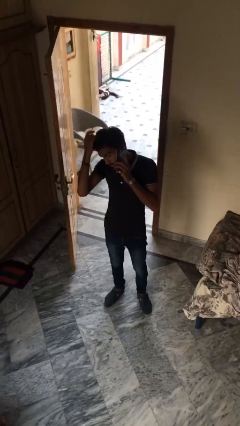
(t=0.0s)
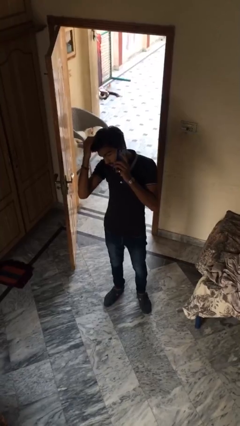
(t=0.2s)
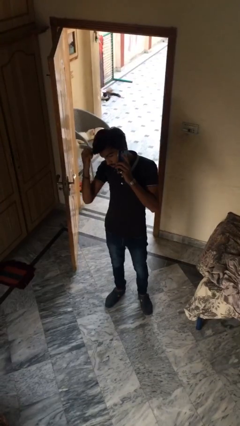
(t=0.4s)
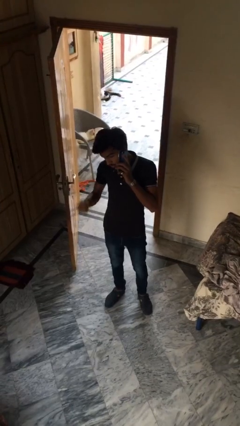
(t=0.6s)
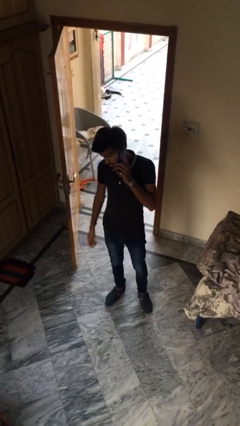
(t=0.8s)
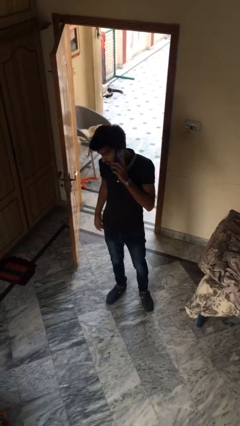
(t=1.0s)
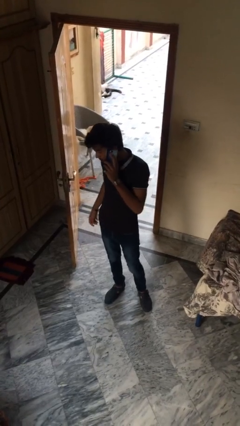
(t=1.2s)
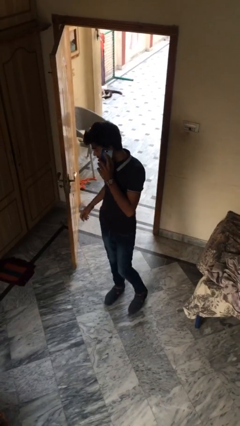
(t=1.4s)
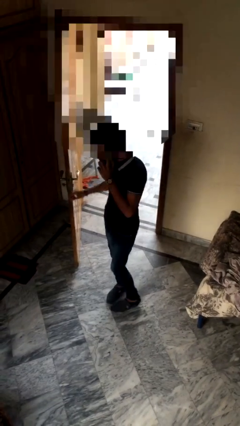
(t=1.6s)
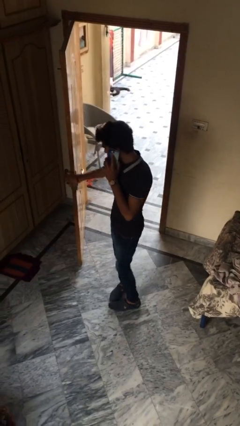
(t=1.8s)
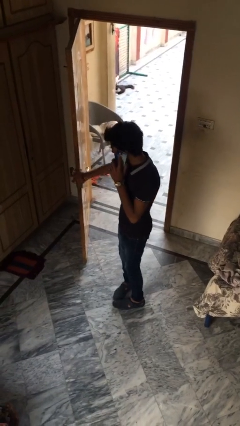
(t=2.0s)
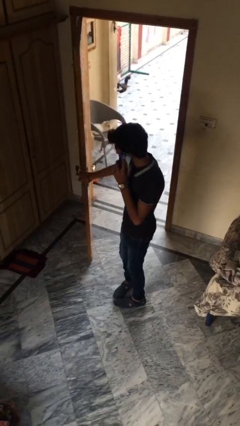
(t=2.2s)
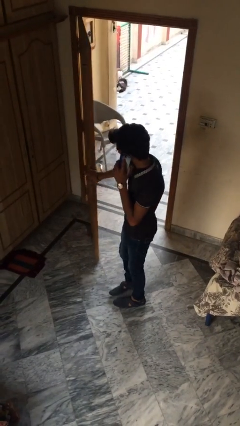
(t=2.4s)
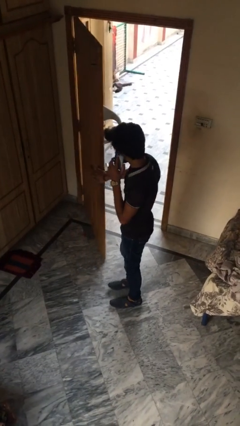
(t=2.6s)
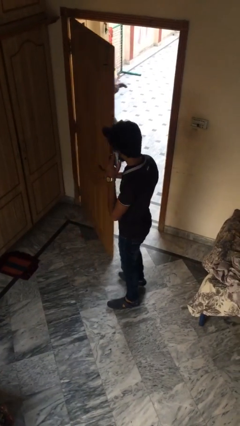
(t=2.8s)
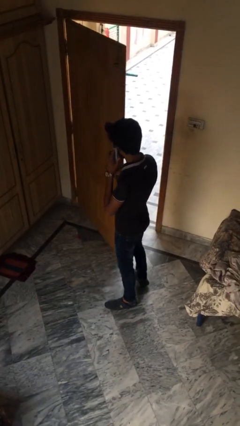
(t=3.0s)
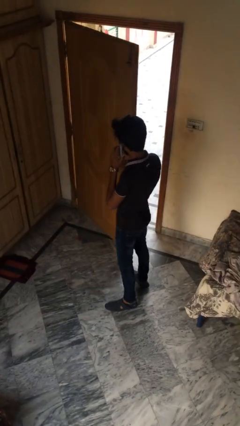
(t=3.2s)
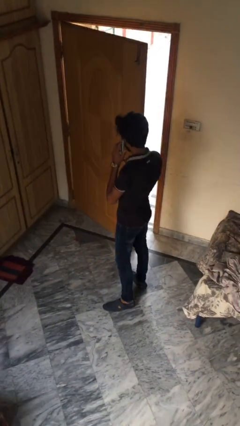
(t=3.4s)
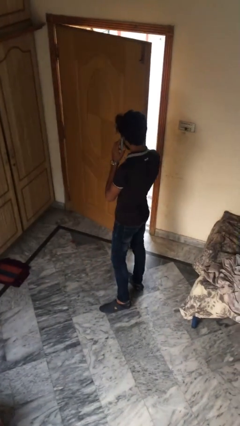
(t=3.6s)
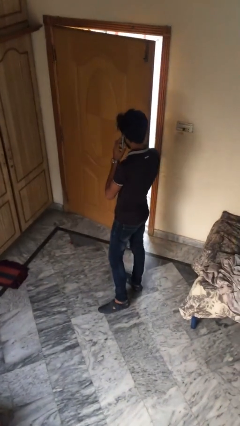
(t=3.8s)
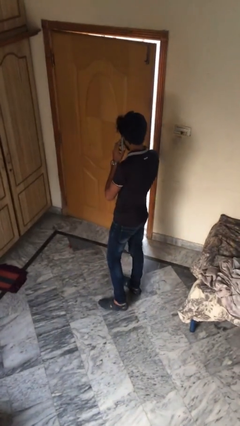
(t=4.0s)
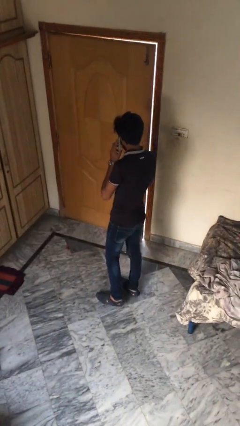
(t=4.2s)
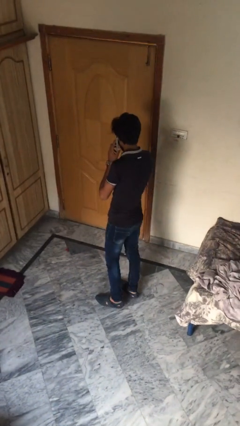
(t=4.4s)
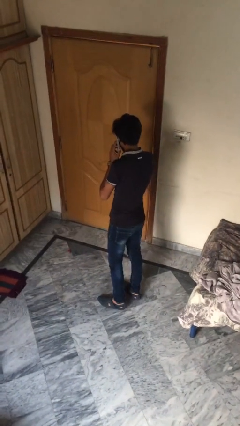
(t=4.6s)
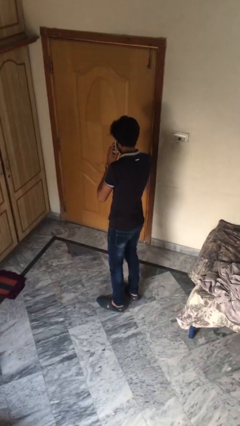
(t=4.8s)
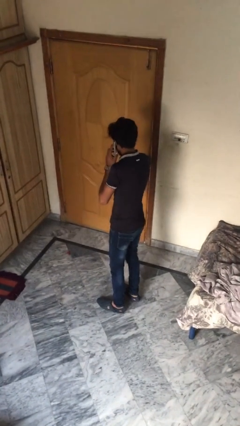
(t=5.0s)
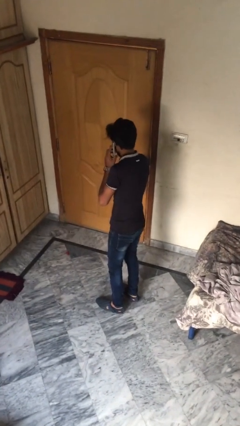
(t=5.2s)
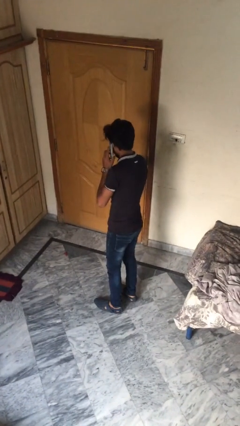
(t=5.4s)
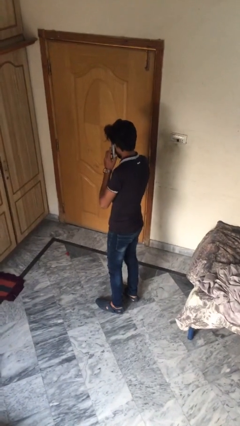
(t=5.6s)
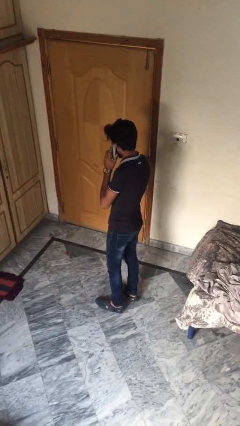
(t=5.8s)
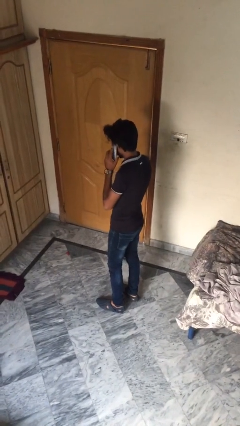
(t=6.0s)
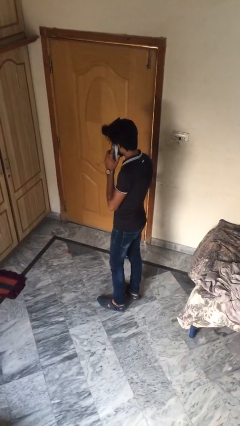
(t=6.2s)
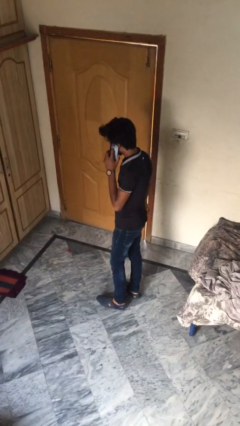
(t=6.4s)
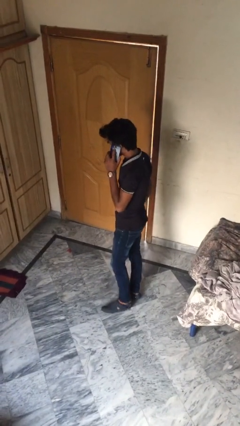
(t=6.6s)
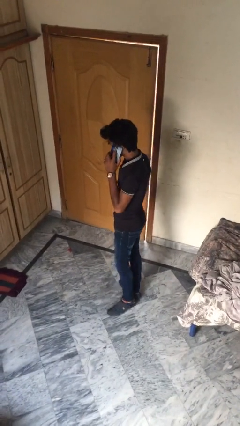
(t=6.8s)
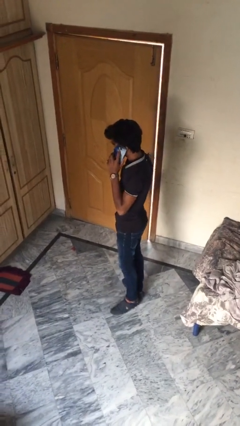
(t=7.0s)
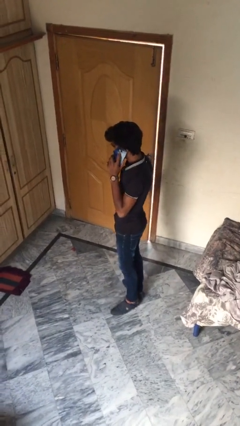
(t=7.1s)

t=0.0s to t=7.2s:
person closes facility door

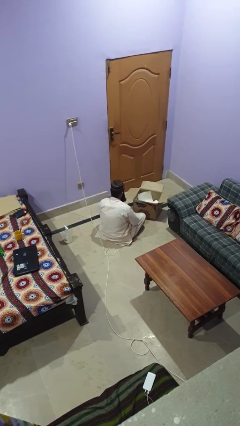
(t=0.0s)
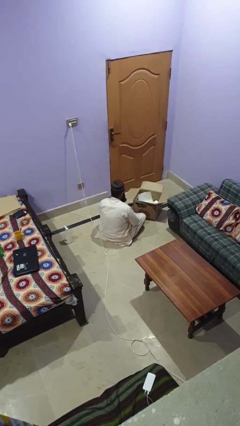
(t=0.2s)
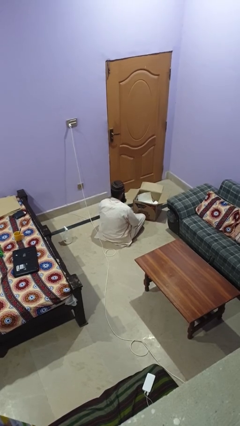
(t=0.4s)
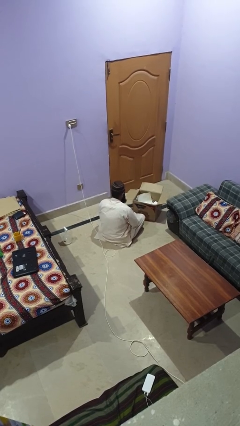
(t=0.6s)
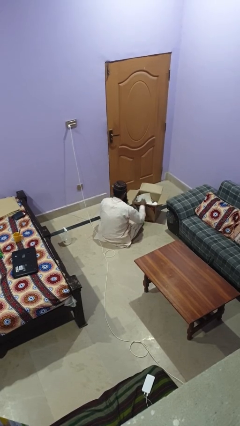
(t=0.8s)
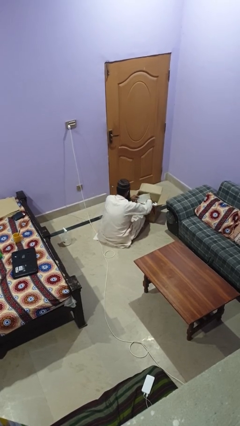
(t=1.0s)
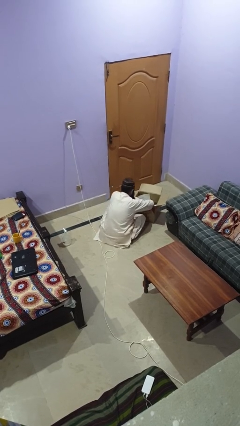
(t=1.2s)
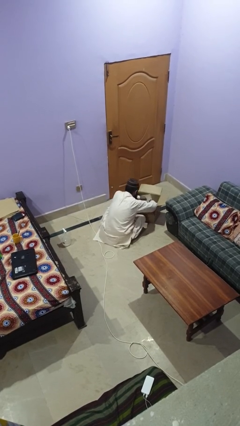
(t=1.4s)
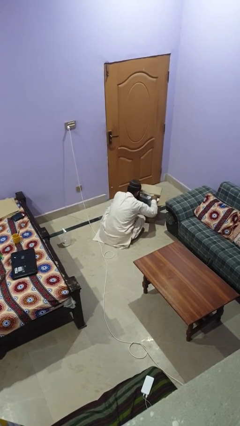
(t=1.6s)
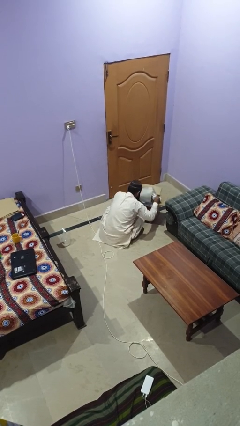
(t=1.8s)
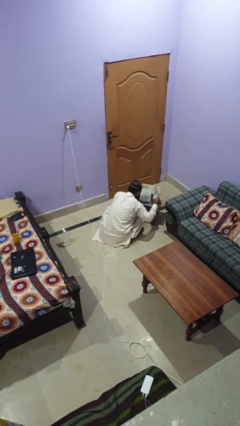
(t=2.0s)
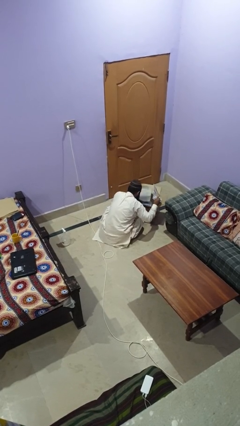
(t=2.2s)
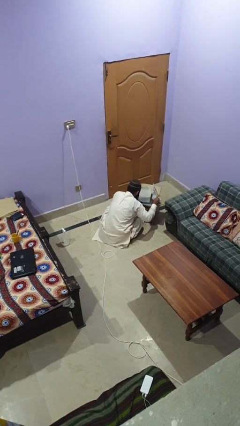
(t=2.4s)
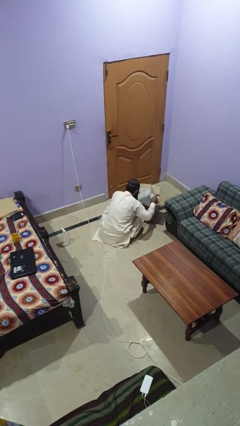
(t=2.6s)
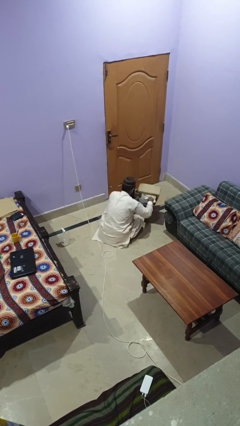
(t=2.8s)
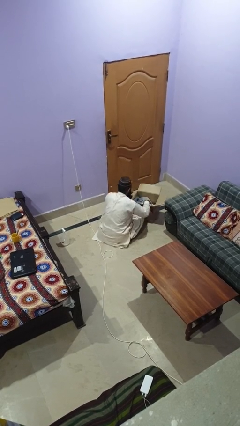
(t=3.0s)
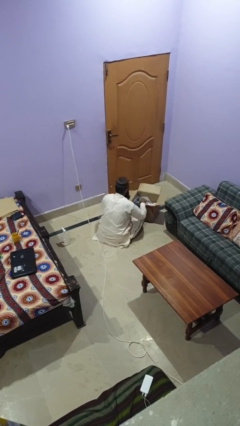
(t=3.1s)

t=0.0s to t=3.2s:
person searches in box

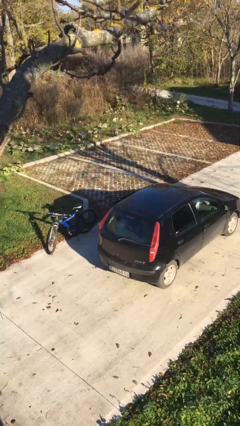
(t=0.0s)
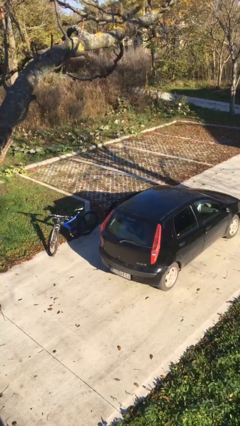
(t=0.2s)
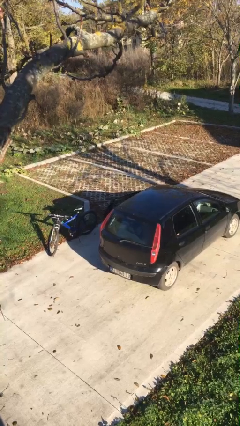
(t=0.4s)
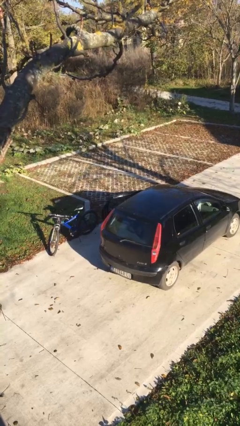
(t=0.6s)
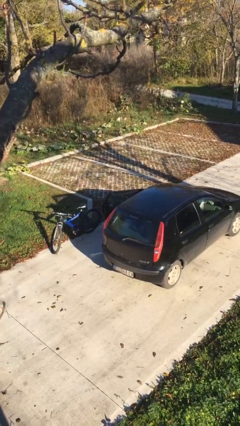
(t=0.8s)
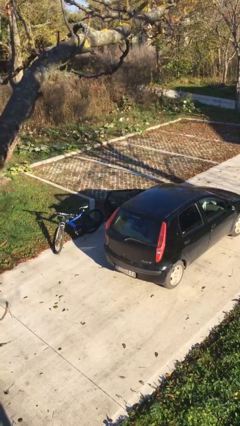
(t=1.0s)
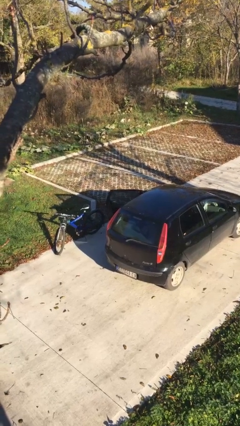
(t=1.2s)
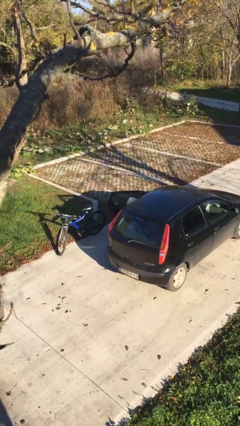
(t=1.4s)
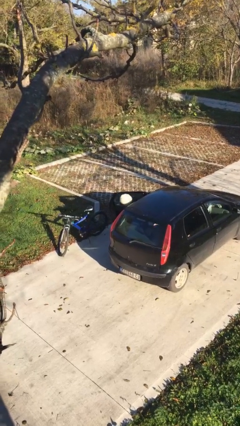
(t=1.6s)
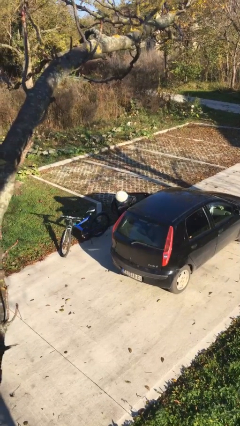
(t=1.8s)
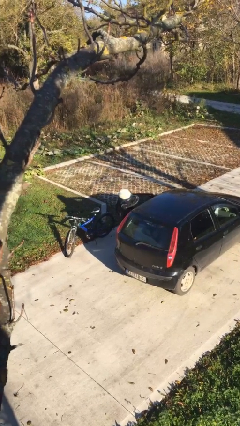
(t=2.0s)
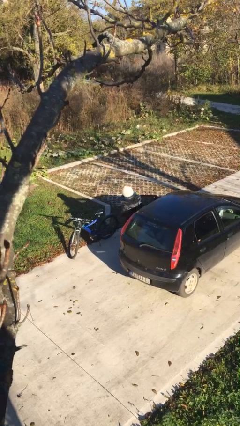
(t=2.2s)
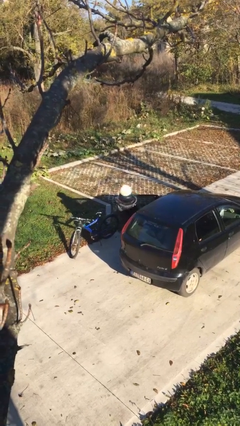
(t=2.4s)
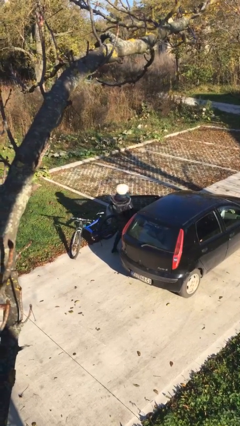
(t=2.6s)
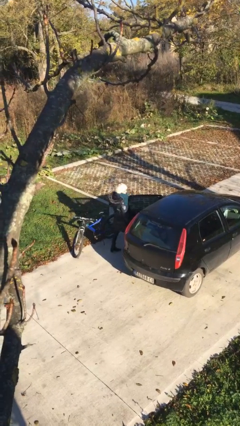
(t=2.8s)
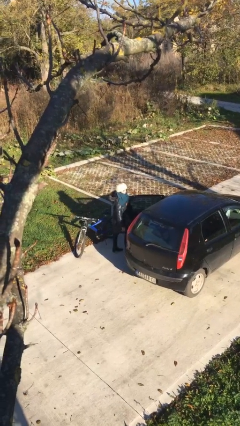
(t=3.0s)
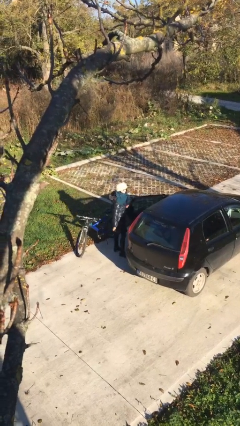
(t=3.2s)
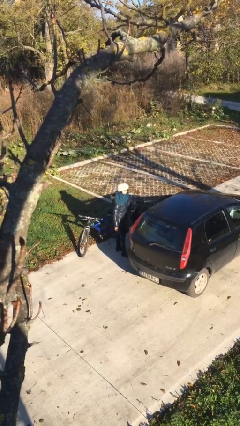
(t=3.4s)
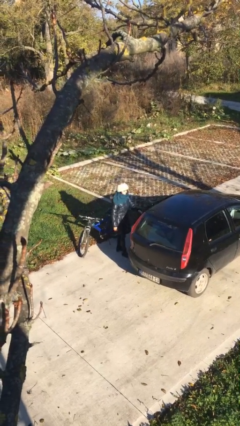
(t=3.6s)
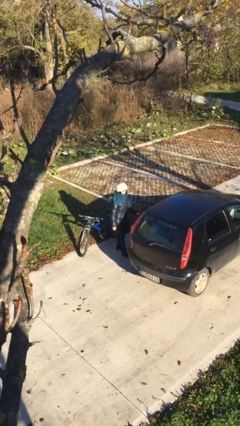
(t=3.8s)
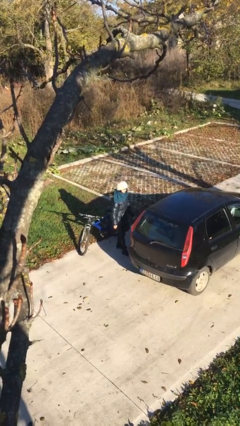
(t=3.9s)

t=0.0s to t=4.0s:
person exits car

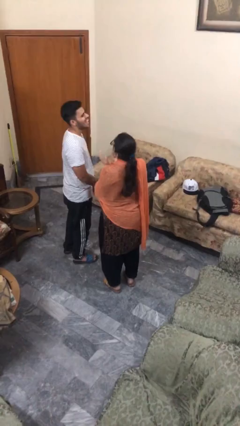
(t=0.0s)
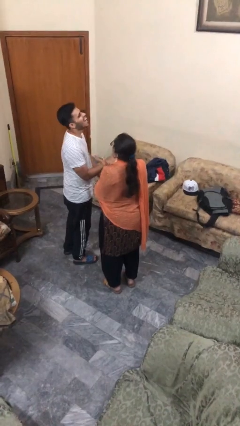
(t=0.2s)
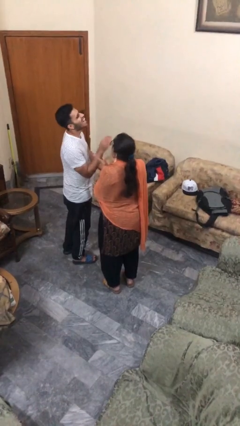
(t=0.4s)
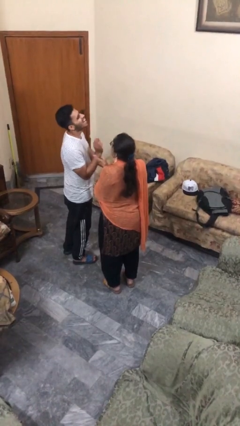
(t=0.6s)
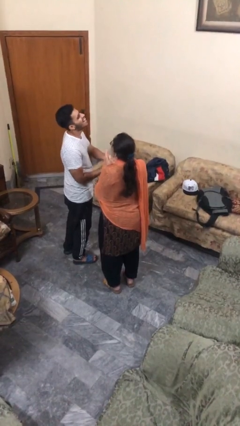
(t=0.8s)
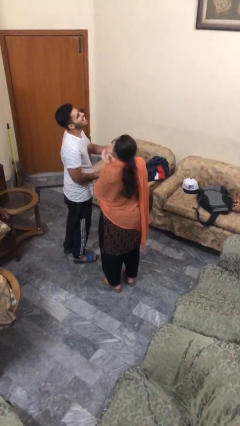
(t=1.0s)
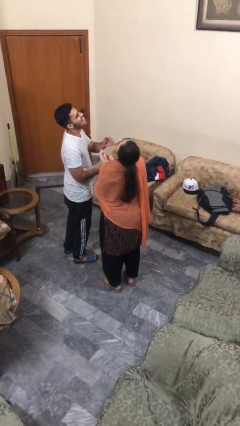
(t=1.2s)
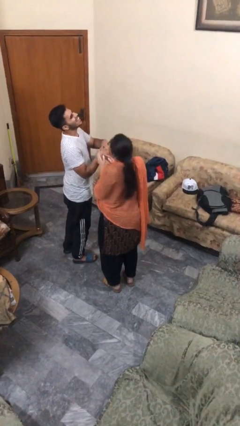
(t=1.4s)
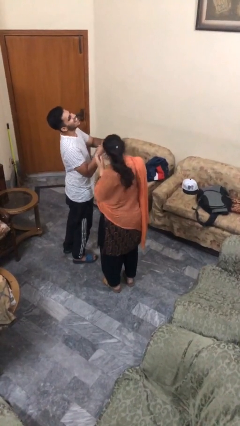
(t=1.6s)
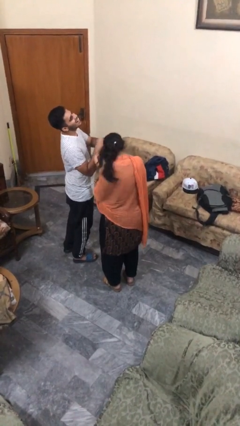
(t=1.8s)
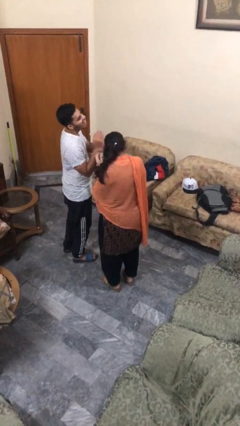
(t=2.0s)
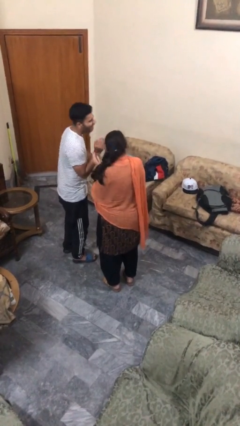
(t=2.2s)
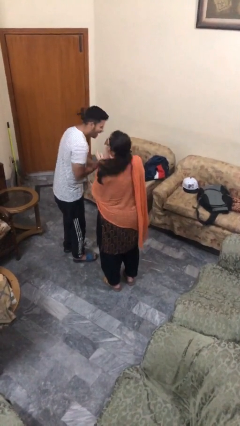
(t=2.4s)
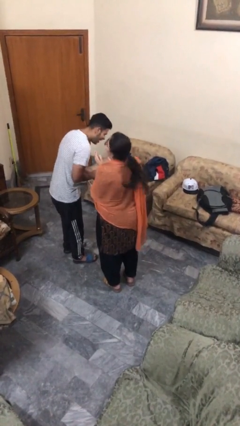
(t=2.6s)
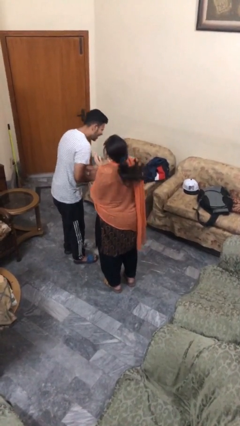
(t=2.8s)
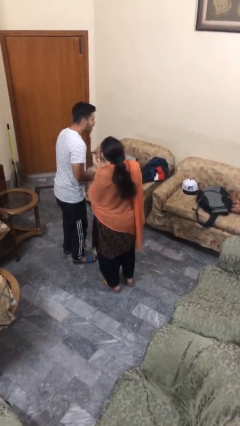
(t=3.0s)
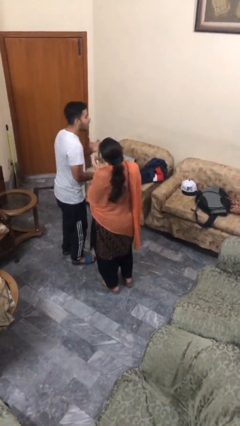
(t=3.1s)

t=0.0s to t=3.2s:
person laughs with person
